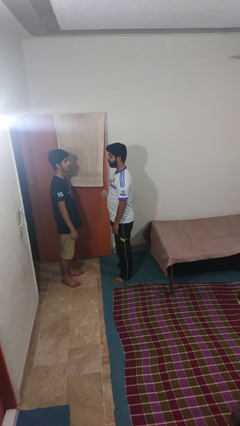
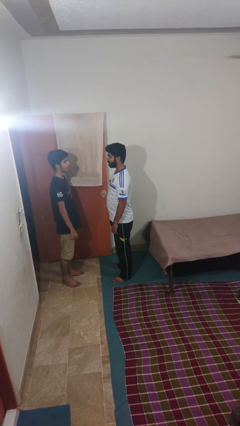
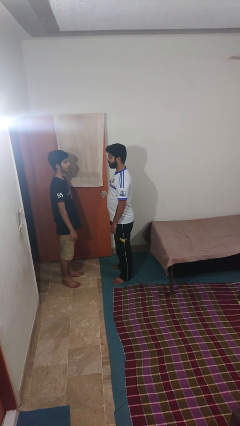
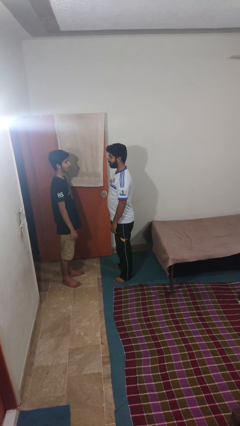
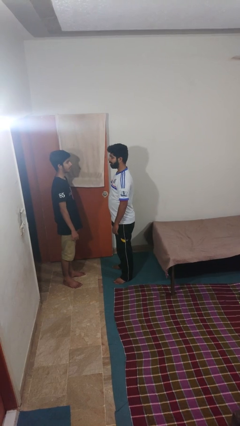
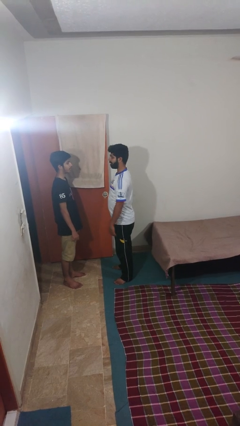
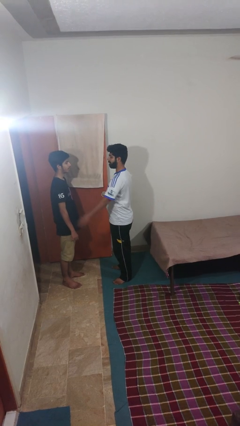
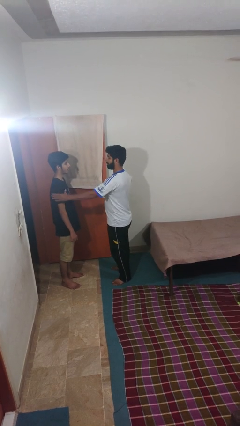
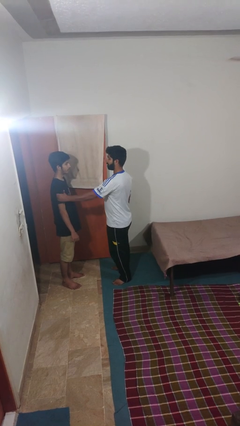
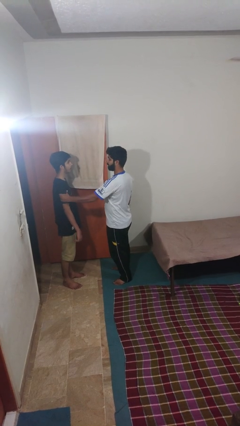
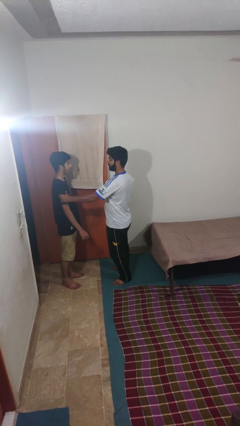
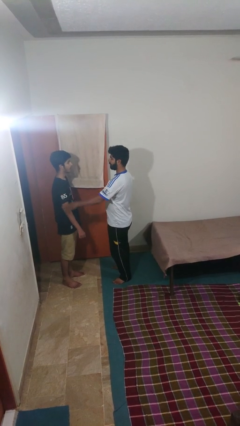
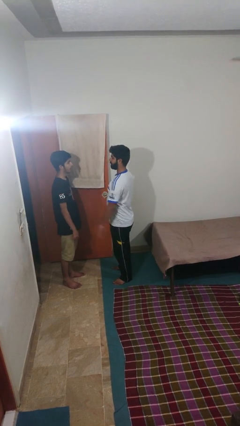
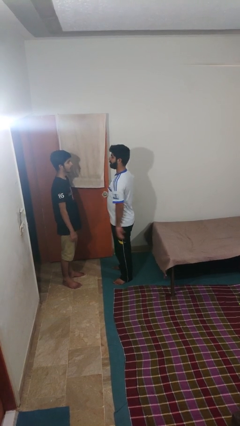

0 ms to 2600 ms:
person grabs person by bicep

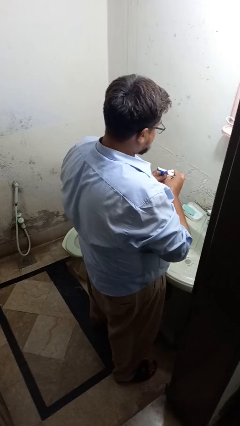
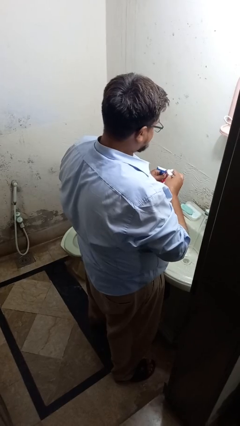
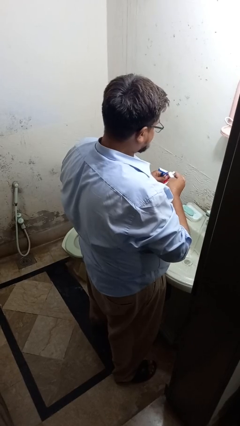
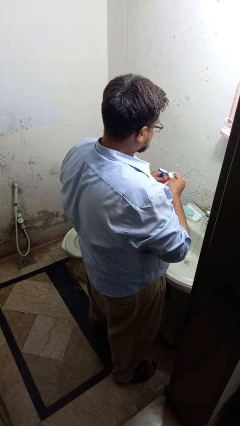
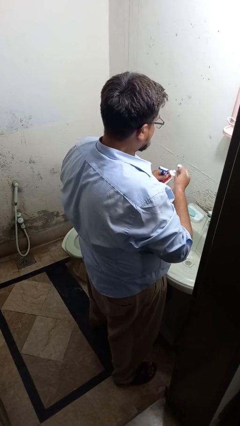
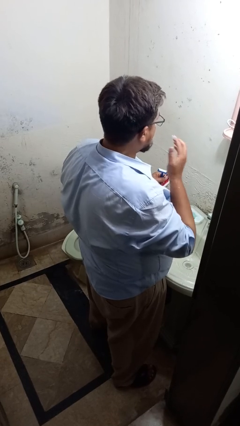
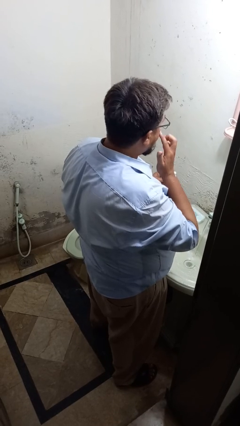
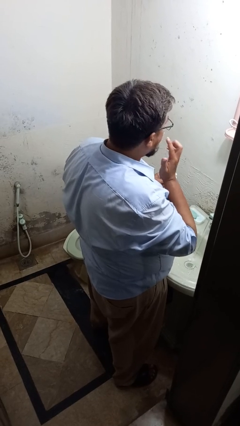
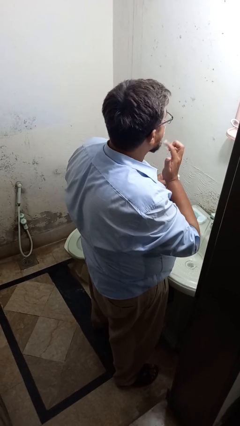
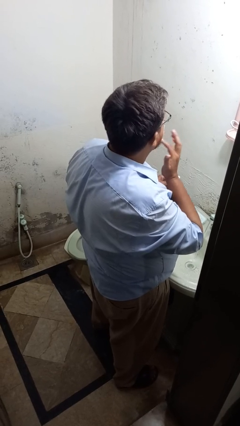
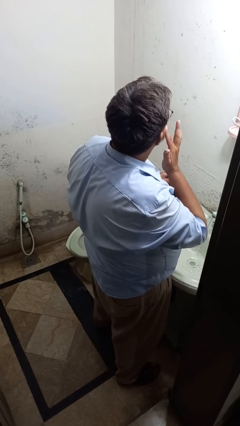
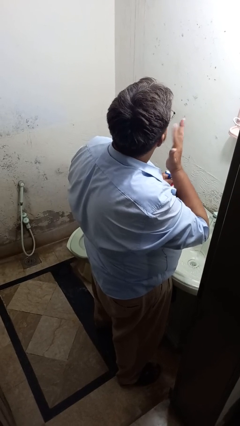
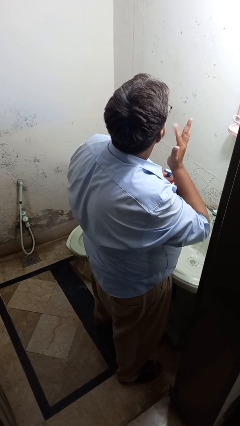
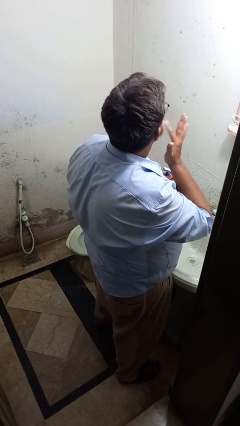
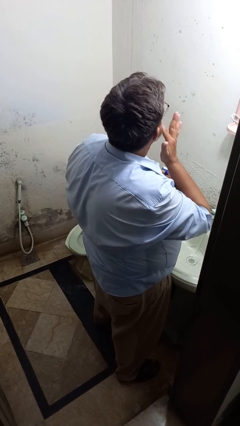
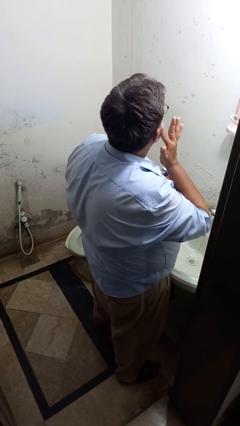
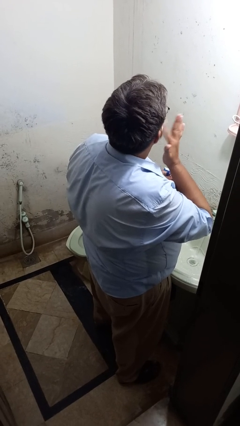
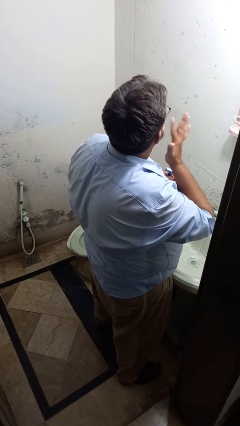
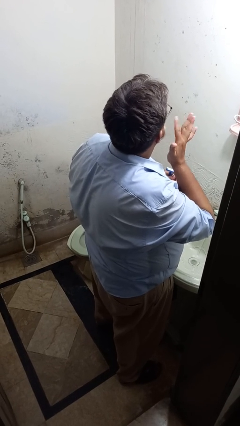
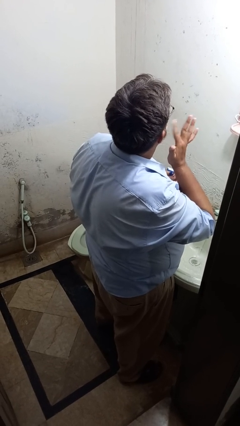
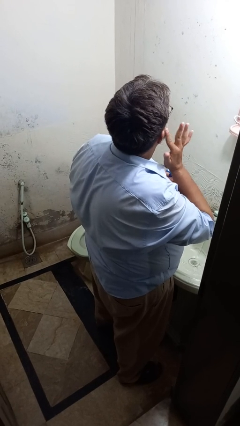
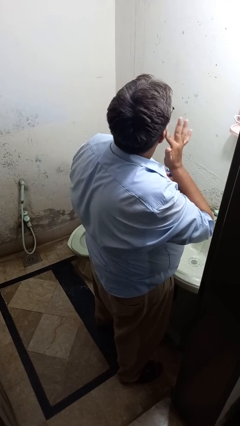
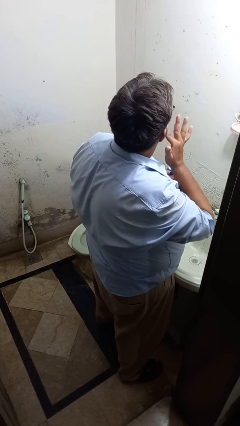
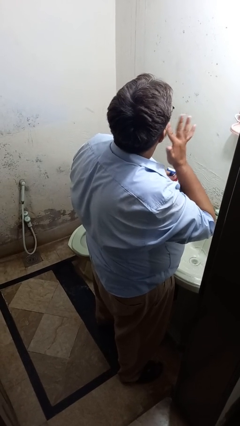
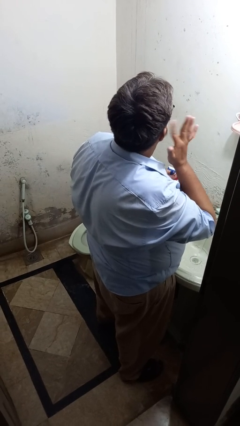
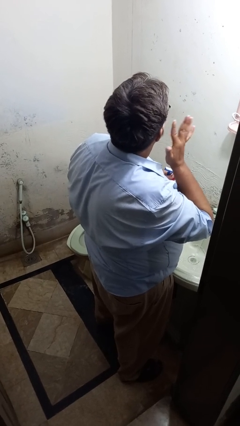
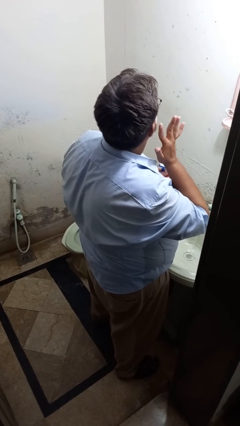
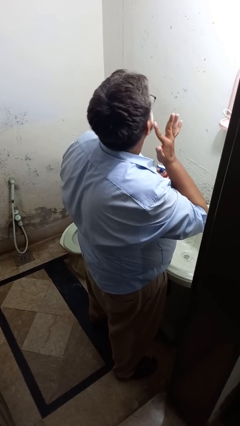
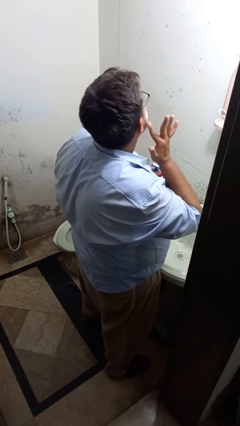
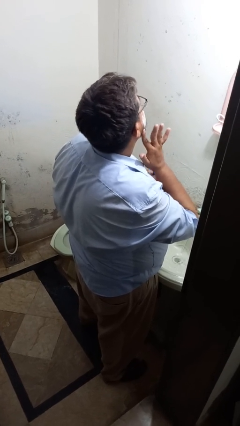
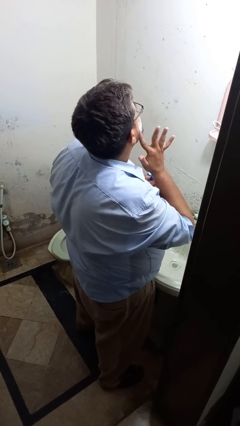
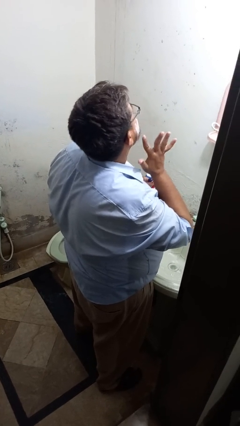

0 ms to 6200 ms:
person applies shaving cream

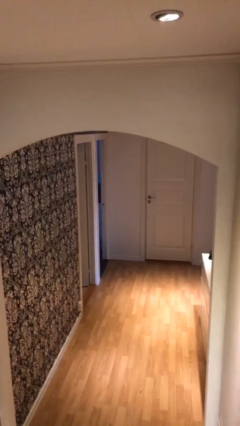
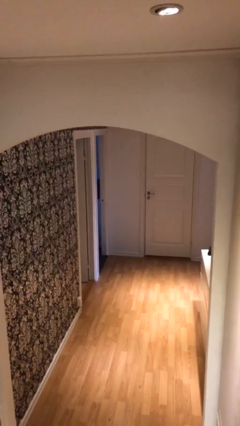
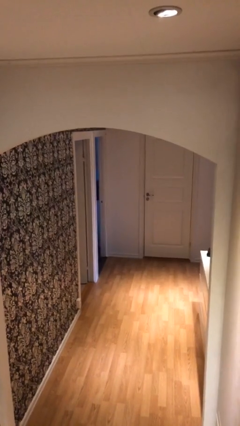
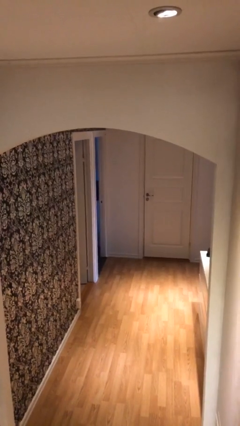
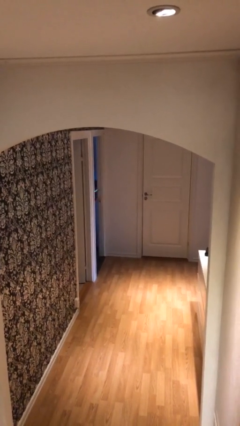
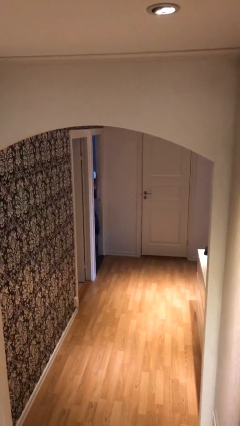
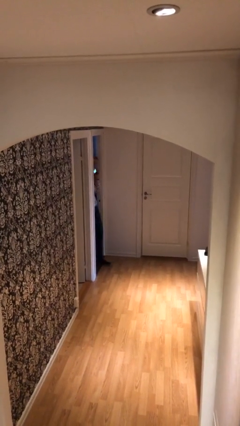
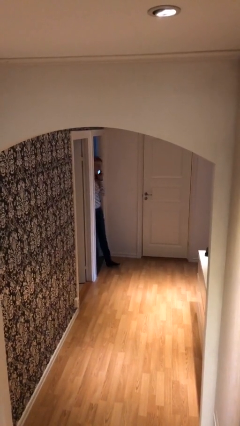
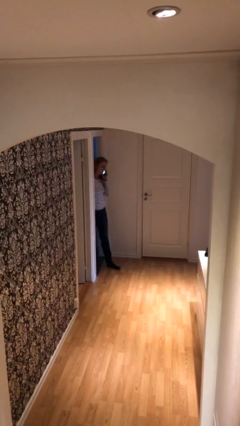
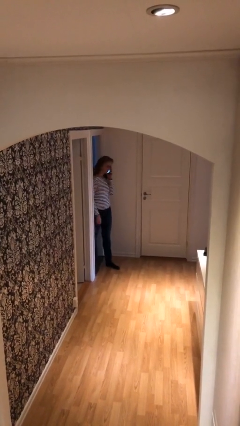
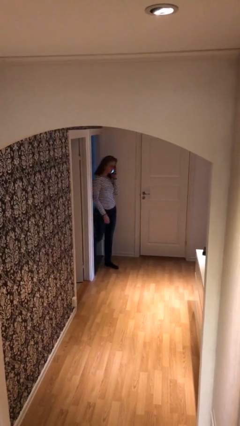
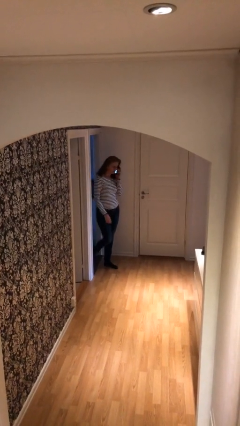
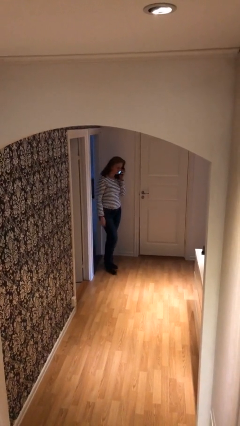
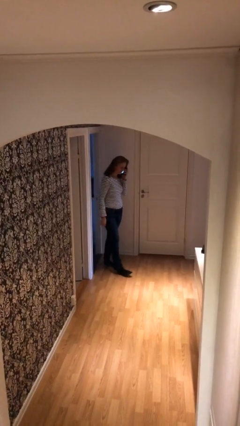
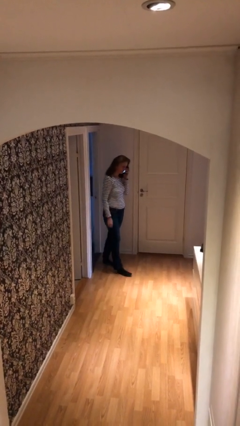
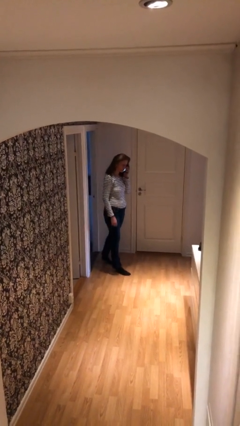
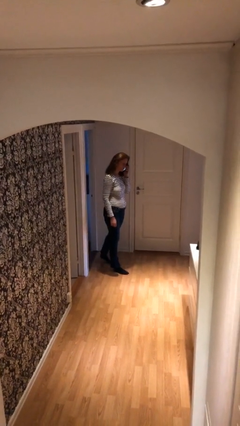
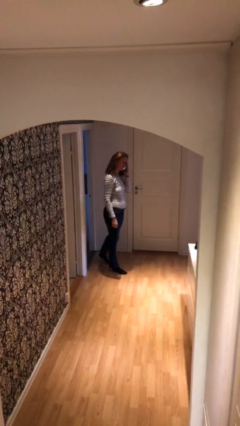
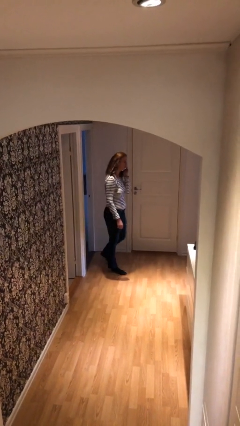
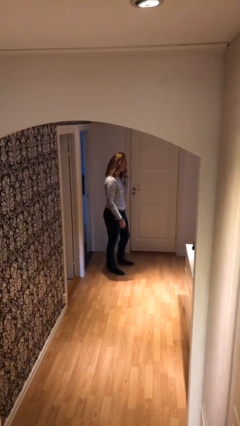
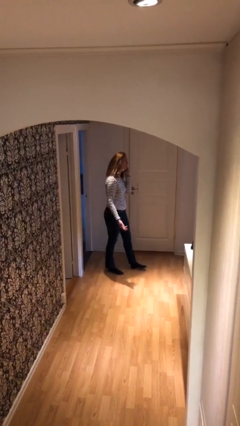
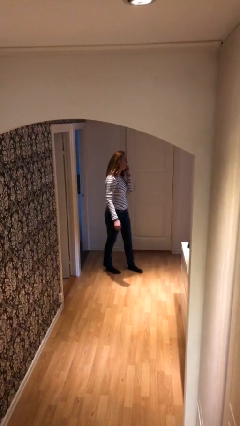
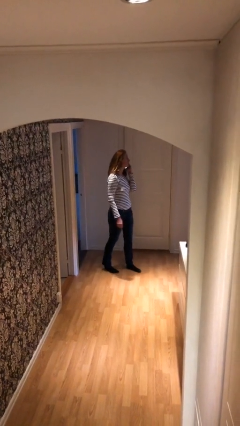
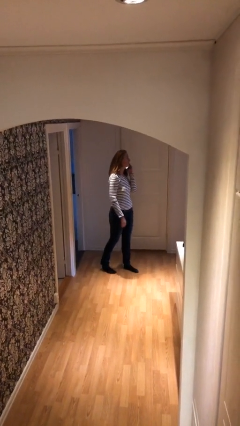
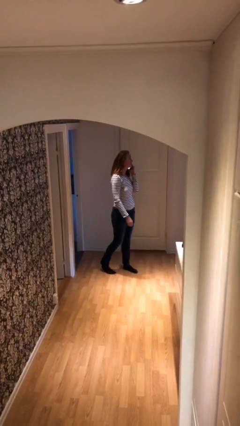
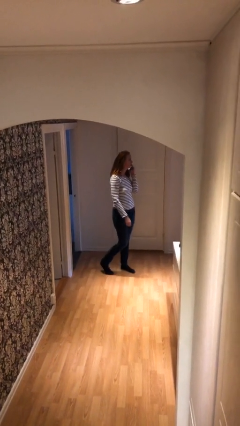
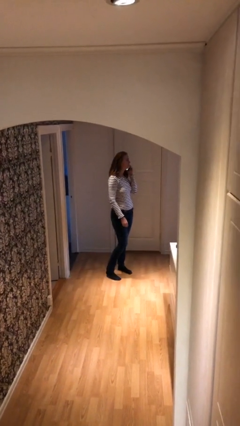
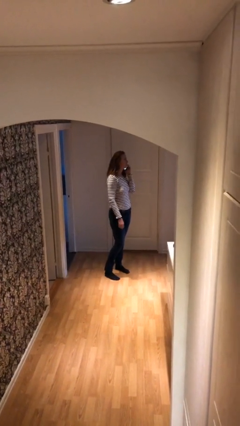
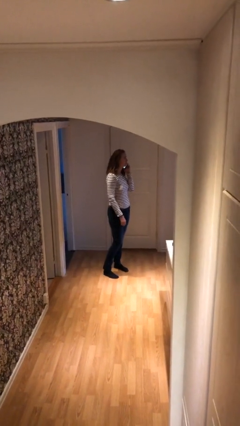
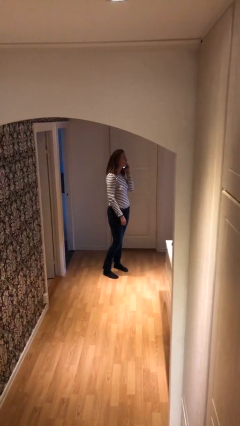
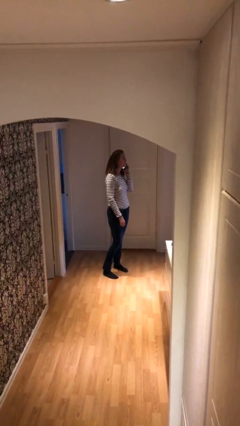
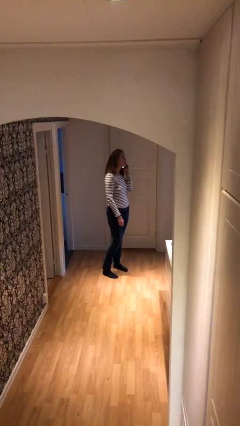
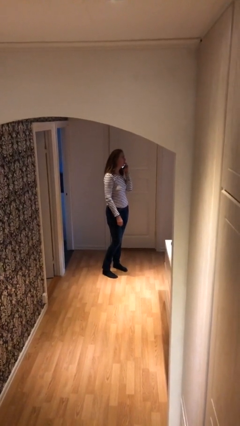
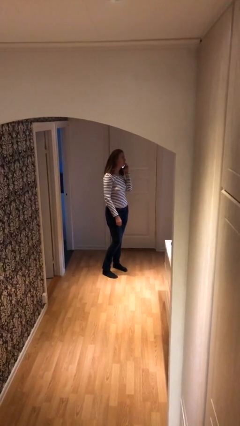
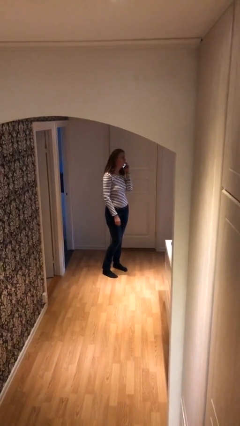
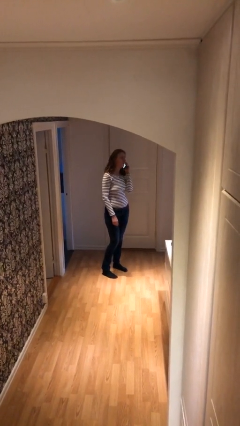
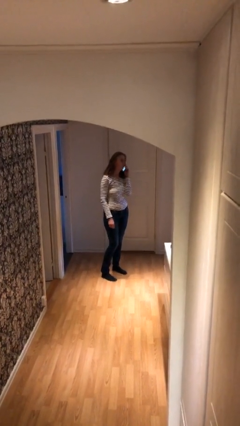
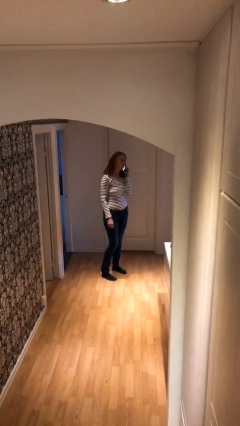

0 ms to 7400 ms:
person enters scene through structure

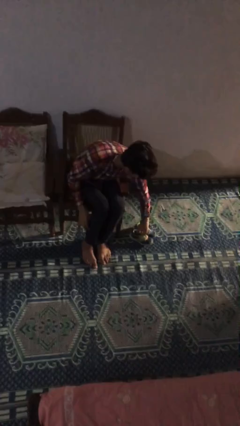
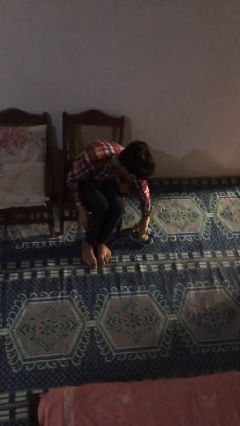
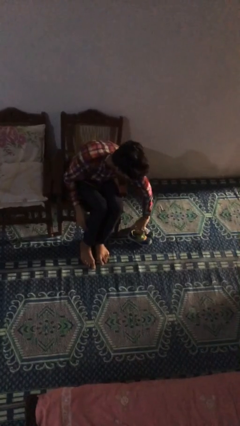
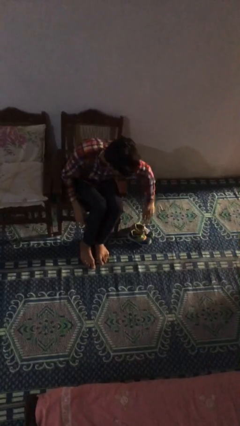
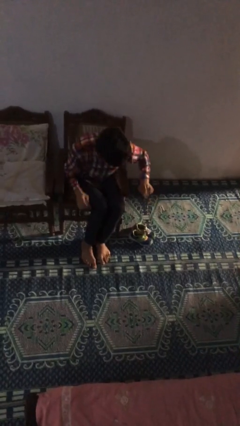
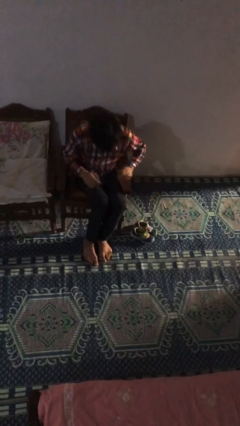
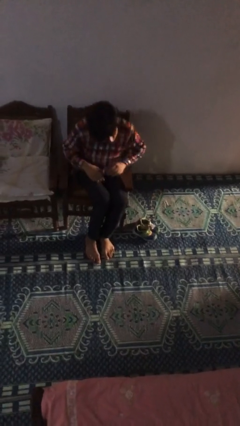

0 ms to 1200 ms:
person puts down object on floor

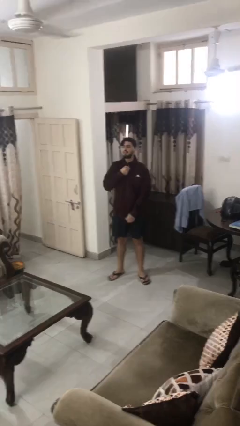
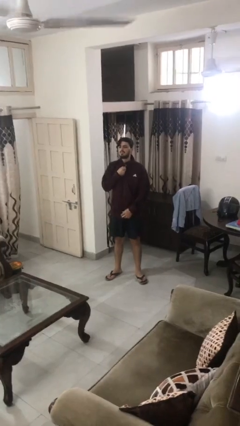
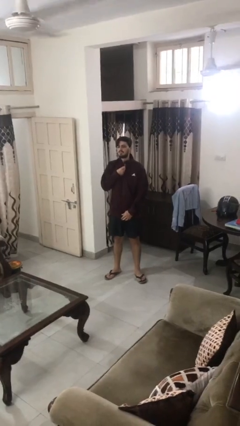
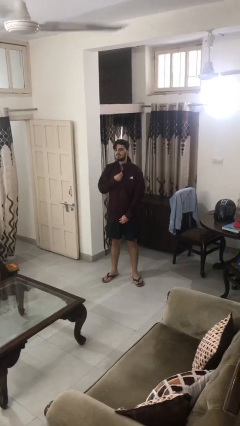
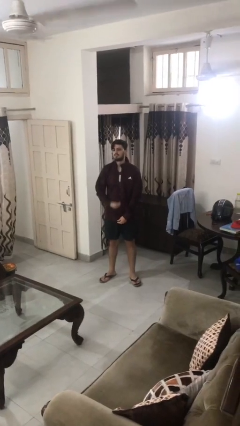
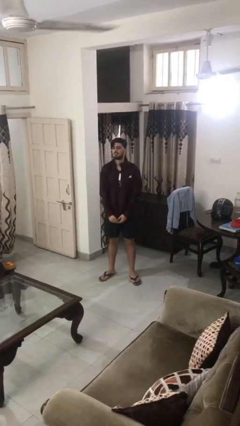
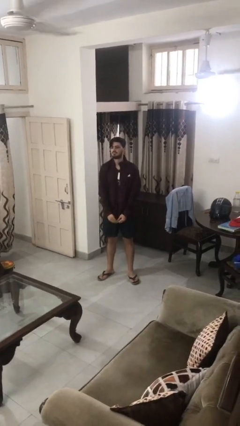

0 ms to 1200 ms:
person unzips jacket
